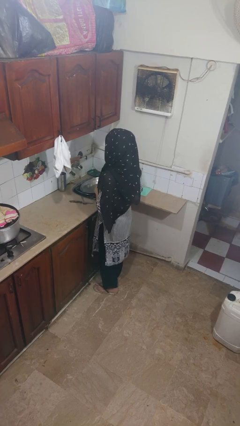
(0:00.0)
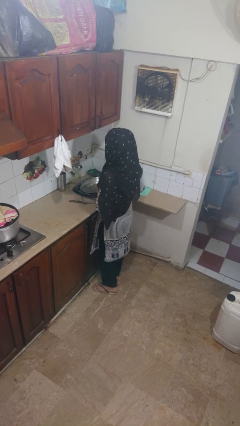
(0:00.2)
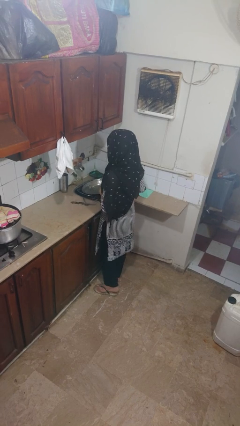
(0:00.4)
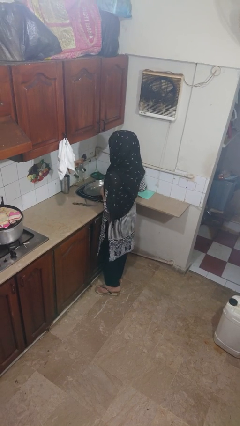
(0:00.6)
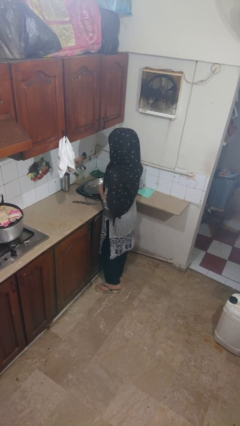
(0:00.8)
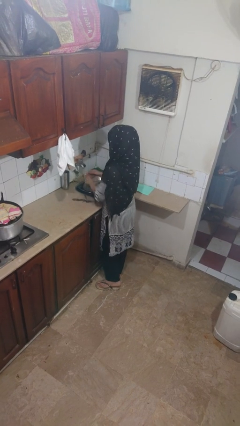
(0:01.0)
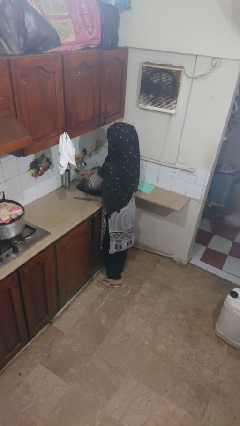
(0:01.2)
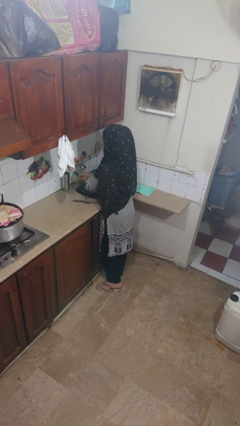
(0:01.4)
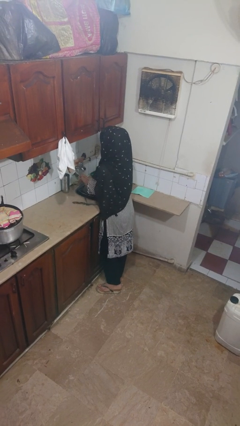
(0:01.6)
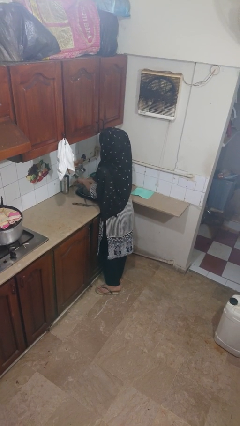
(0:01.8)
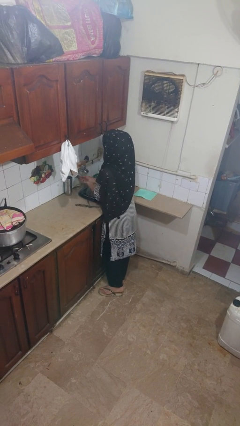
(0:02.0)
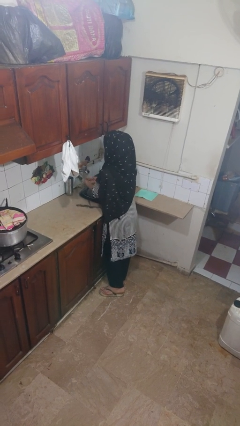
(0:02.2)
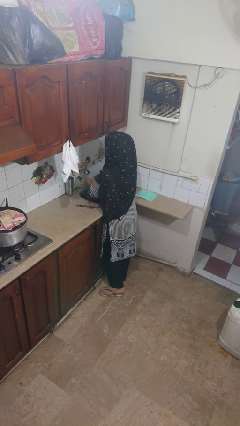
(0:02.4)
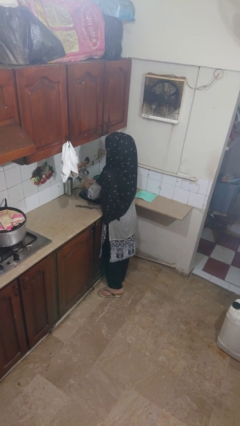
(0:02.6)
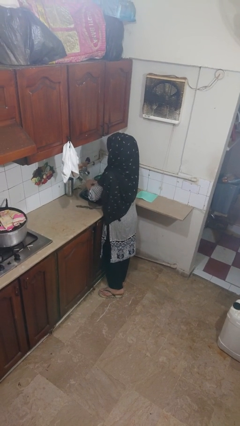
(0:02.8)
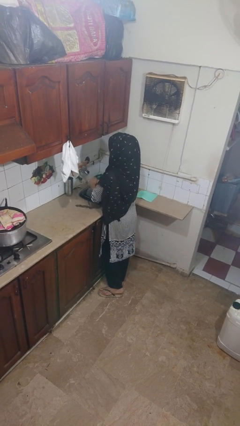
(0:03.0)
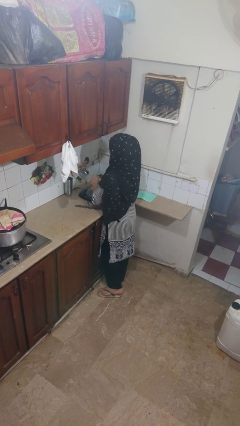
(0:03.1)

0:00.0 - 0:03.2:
person washes hands

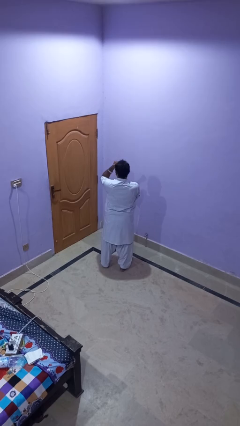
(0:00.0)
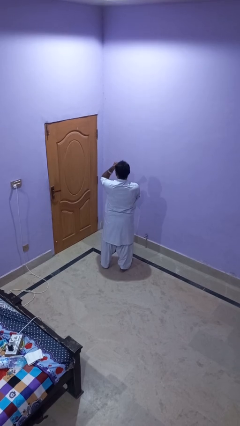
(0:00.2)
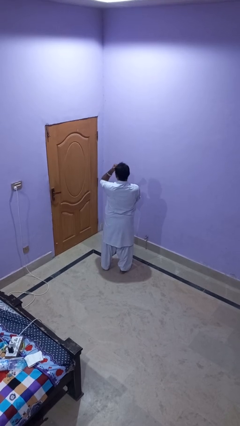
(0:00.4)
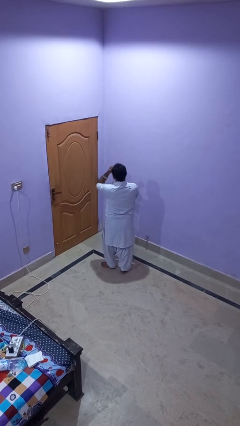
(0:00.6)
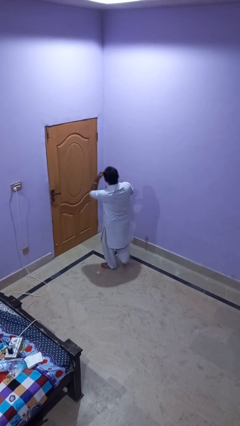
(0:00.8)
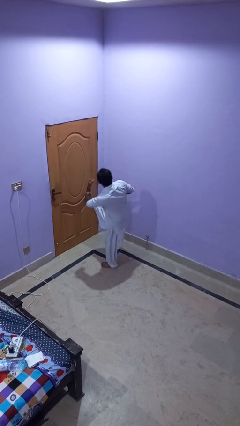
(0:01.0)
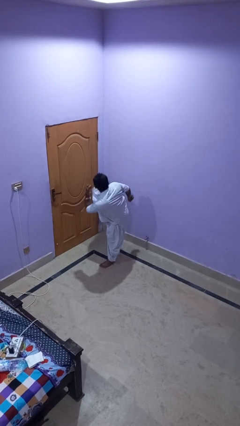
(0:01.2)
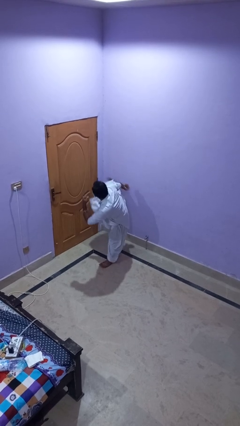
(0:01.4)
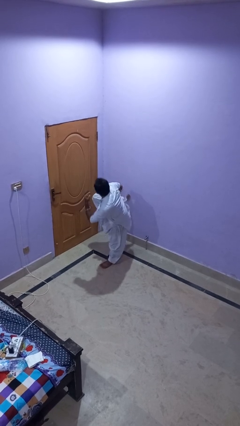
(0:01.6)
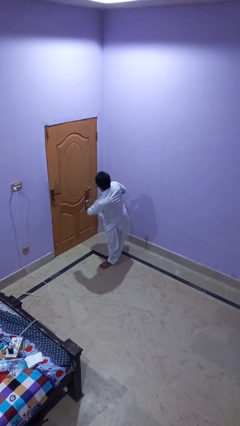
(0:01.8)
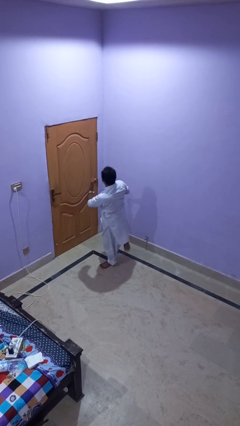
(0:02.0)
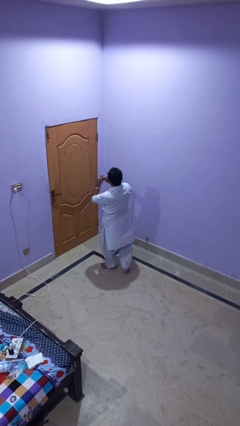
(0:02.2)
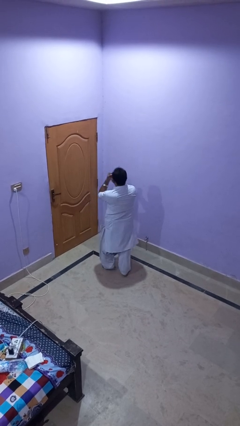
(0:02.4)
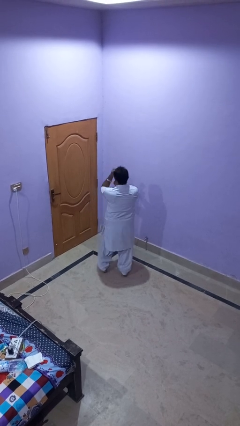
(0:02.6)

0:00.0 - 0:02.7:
person karate kicks

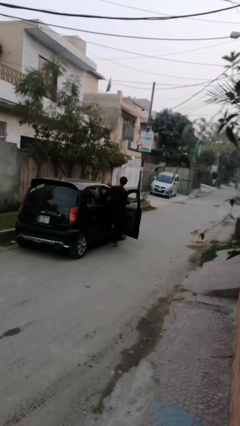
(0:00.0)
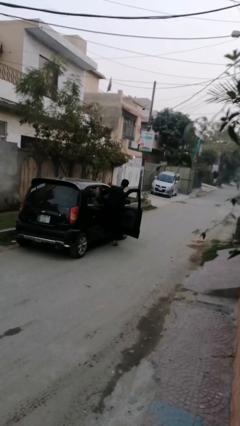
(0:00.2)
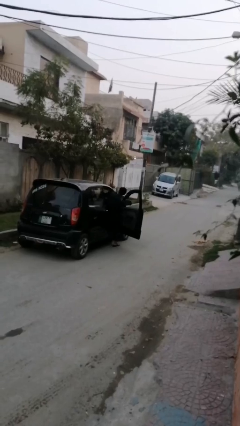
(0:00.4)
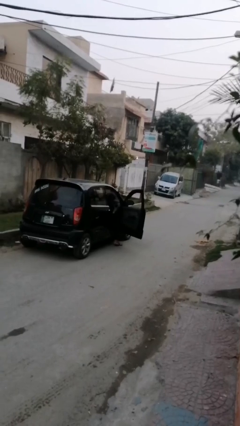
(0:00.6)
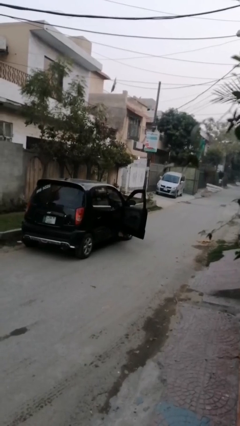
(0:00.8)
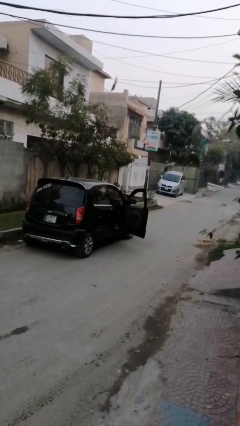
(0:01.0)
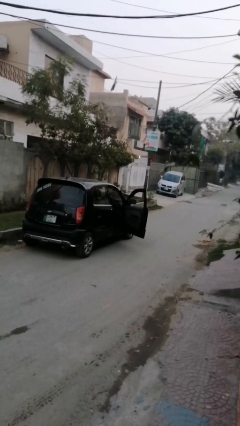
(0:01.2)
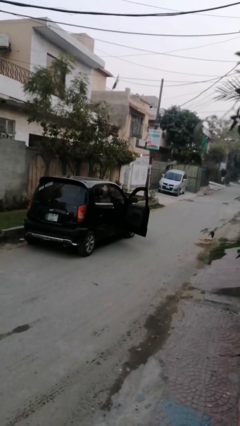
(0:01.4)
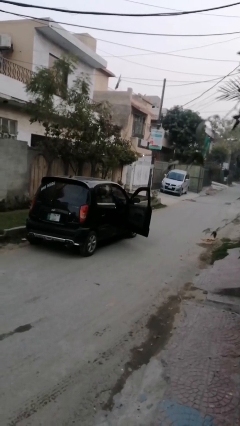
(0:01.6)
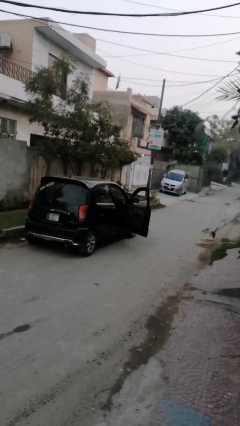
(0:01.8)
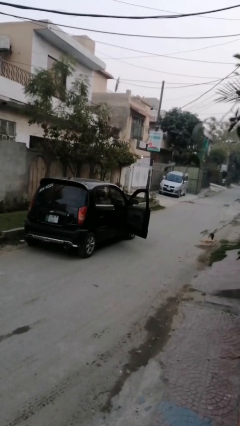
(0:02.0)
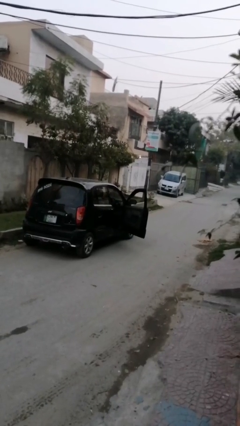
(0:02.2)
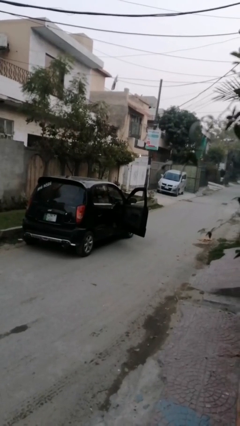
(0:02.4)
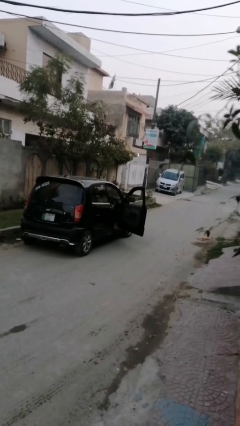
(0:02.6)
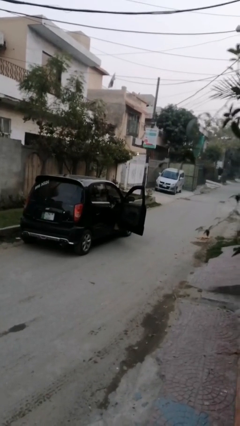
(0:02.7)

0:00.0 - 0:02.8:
person enters car

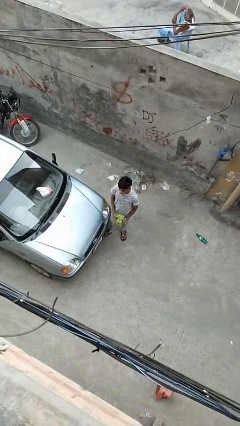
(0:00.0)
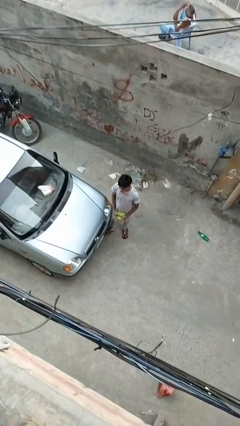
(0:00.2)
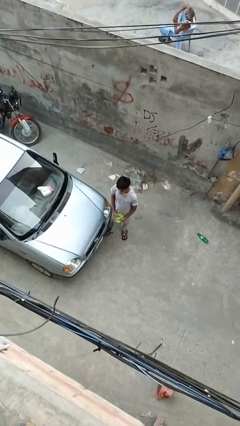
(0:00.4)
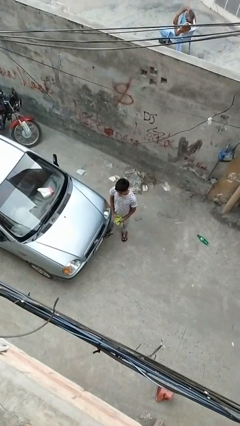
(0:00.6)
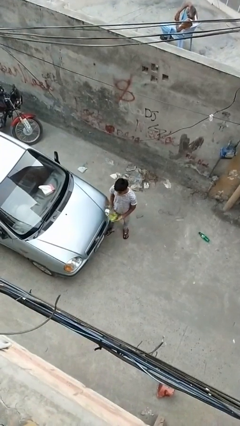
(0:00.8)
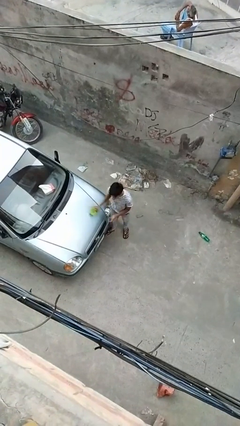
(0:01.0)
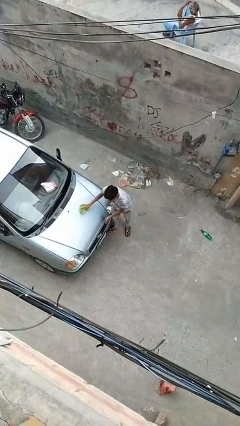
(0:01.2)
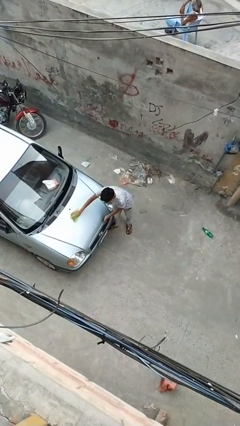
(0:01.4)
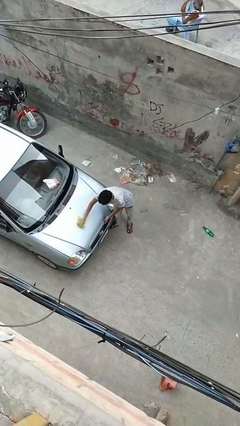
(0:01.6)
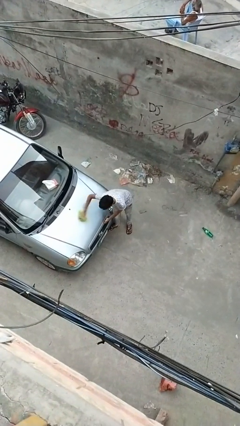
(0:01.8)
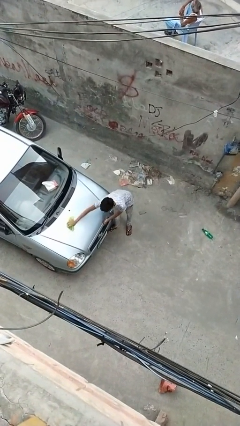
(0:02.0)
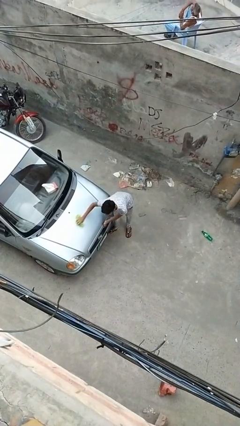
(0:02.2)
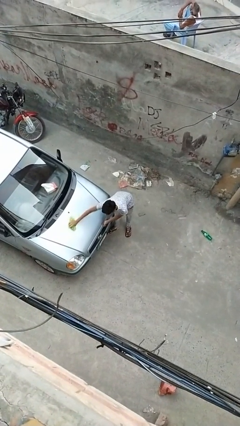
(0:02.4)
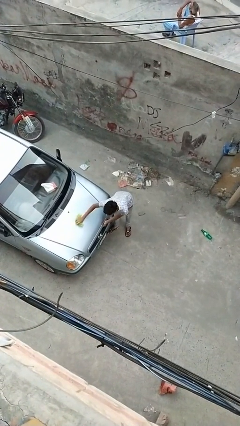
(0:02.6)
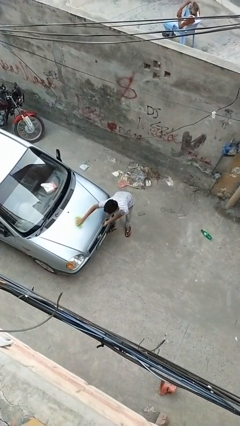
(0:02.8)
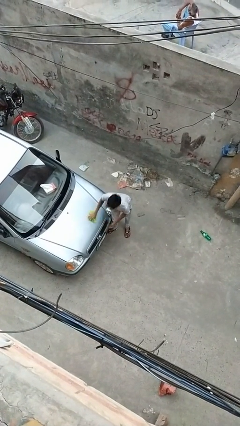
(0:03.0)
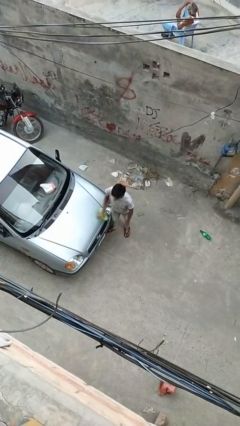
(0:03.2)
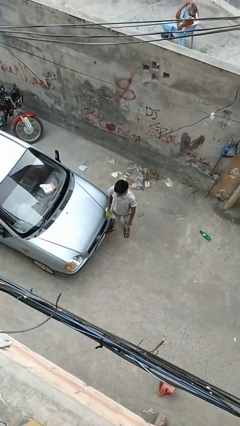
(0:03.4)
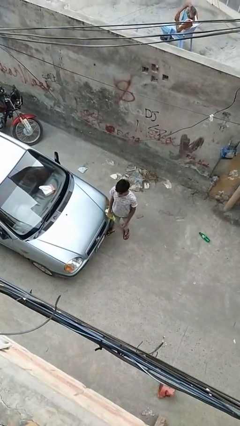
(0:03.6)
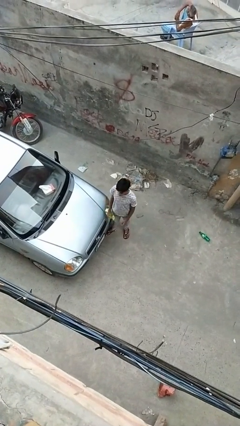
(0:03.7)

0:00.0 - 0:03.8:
person polishes car with rag

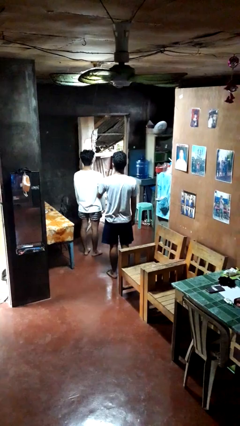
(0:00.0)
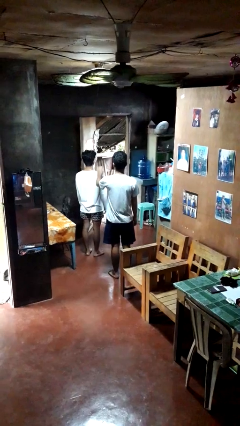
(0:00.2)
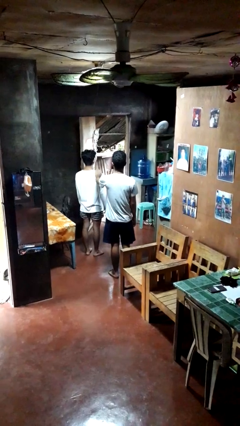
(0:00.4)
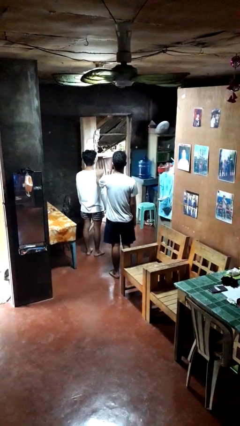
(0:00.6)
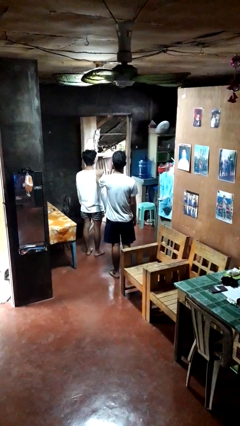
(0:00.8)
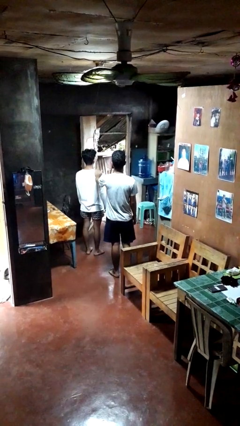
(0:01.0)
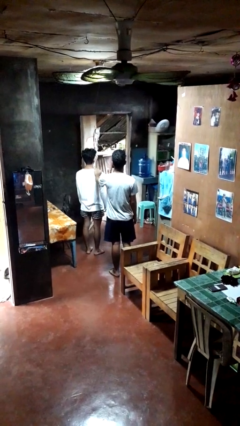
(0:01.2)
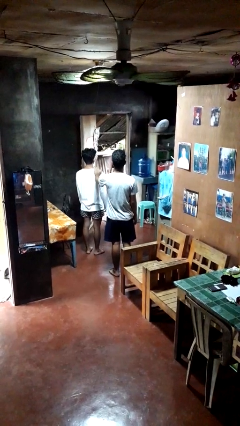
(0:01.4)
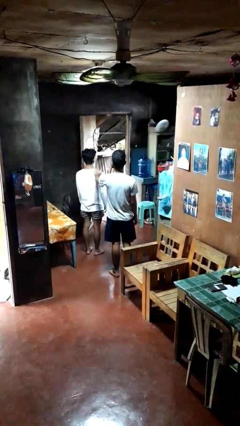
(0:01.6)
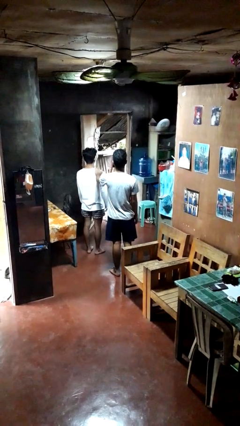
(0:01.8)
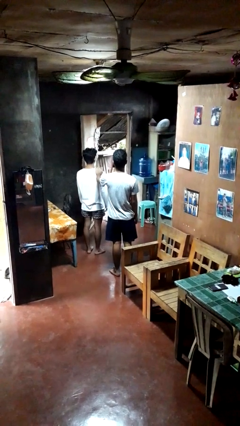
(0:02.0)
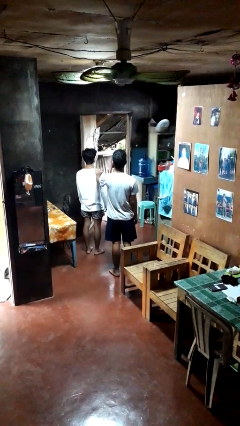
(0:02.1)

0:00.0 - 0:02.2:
person pounds shoulders of person

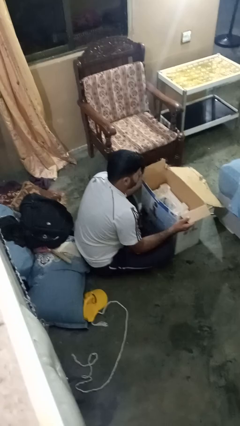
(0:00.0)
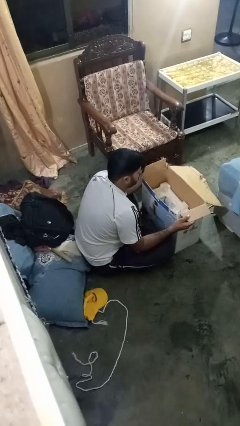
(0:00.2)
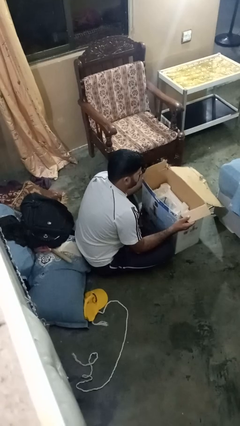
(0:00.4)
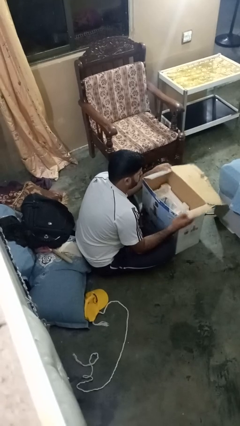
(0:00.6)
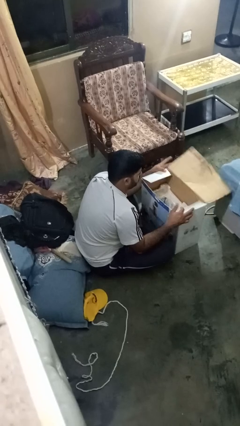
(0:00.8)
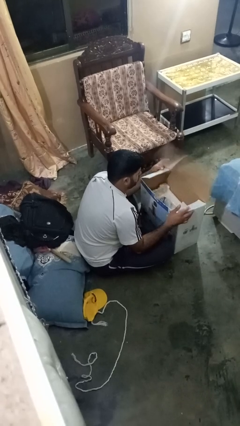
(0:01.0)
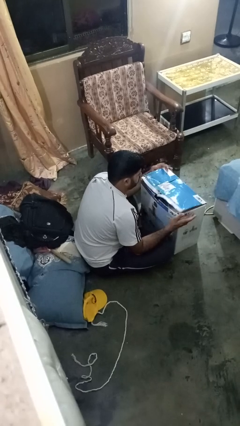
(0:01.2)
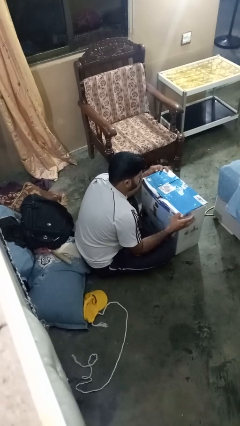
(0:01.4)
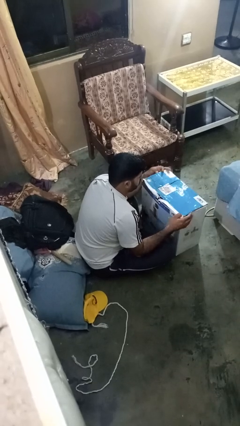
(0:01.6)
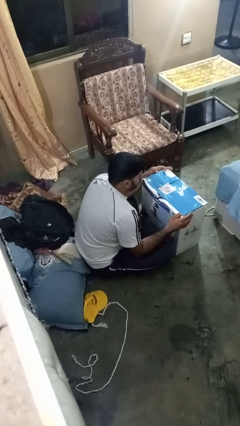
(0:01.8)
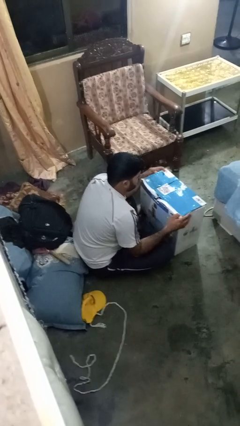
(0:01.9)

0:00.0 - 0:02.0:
person closes box

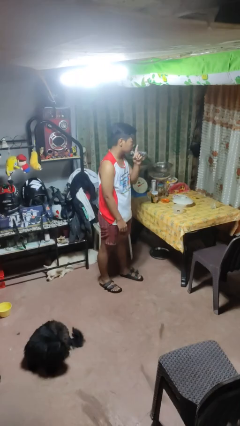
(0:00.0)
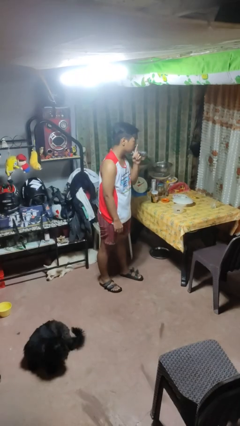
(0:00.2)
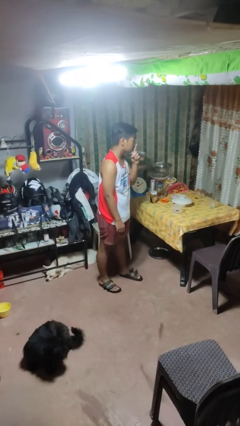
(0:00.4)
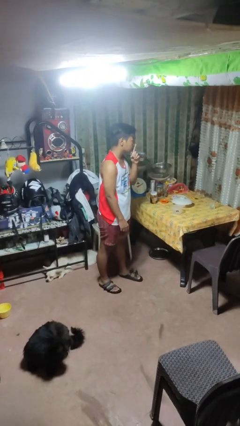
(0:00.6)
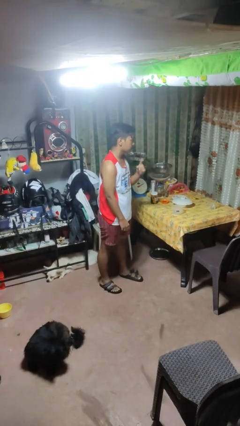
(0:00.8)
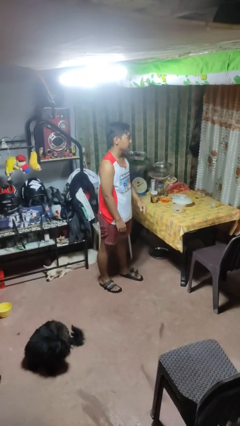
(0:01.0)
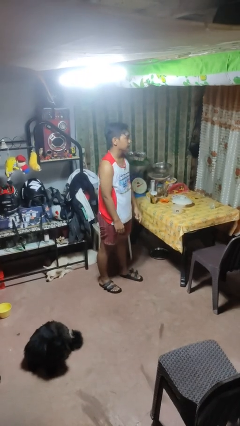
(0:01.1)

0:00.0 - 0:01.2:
person gestures be quiet
